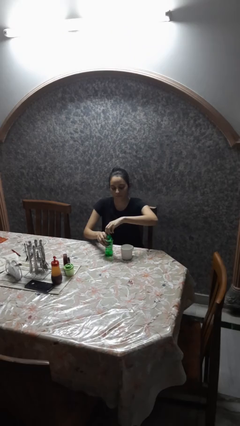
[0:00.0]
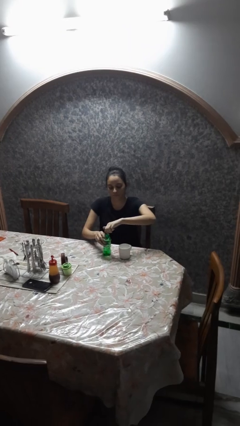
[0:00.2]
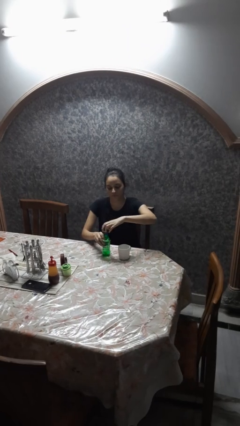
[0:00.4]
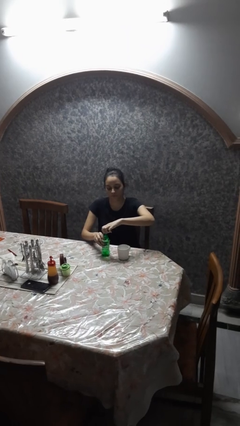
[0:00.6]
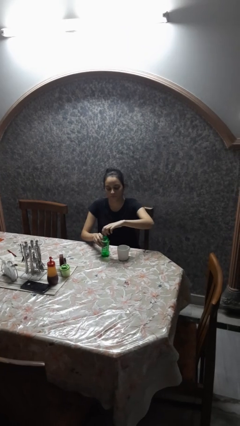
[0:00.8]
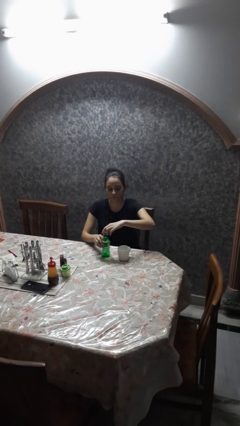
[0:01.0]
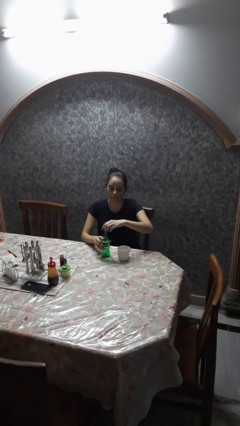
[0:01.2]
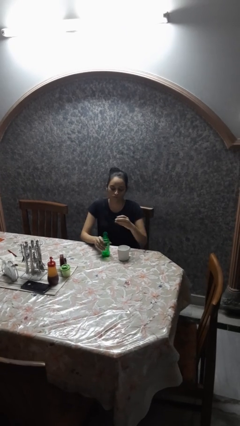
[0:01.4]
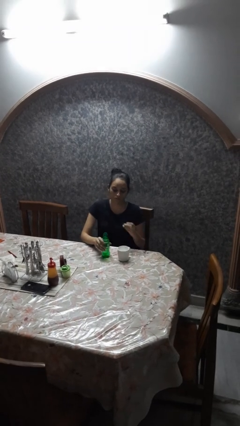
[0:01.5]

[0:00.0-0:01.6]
person unscrews lid from bottle

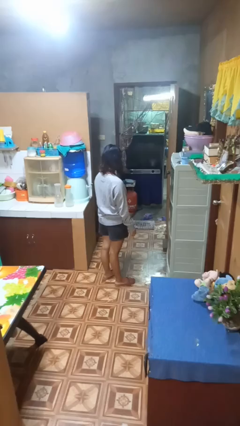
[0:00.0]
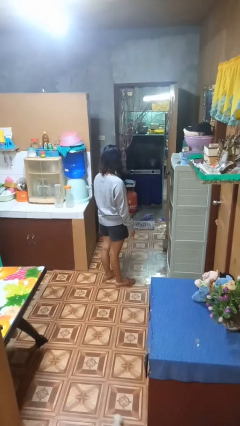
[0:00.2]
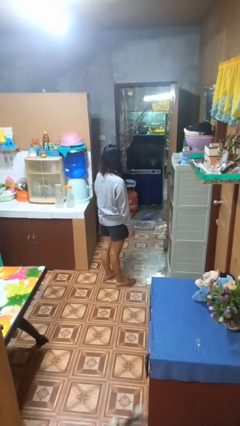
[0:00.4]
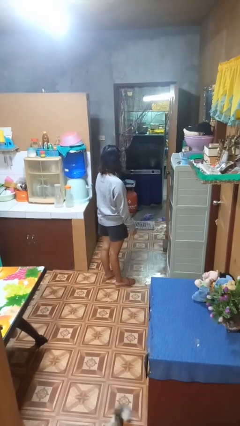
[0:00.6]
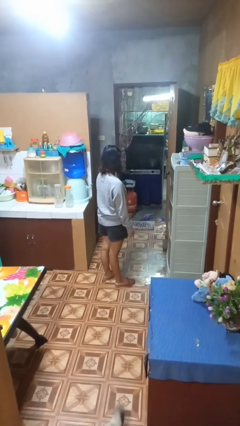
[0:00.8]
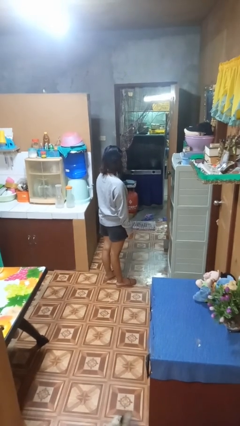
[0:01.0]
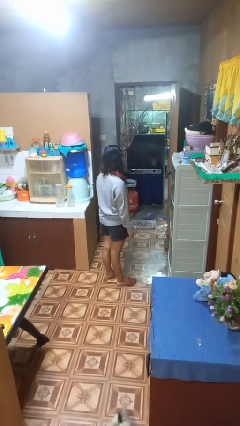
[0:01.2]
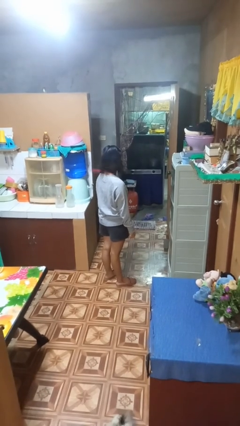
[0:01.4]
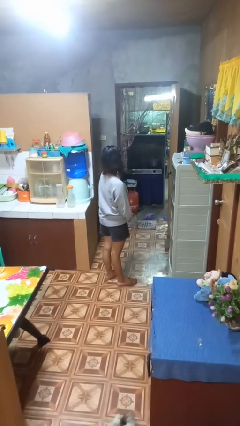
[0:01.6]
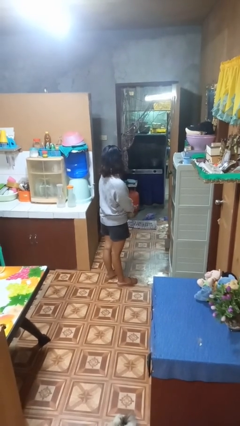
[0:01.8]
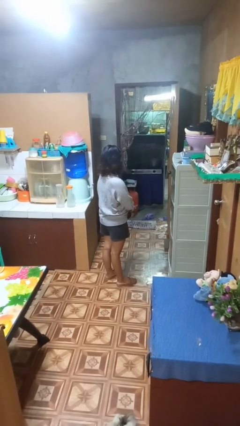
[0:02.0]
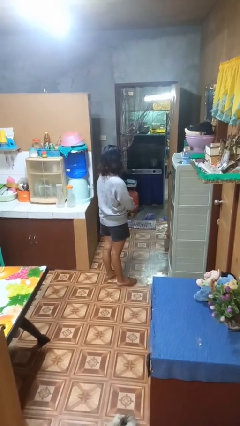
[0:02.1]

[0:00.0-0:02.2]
person takes off necktie

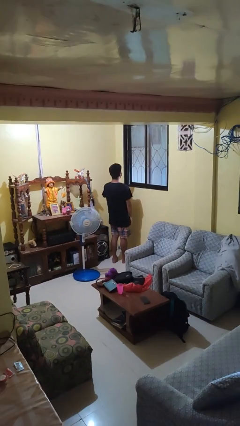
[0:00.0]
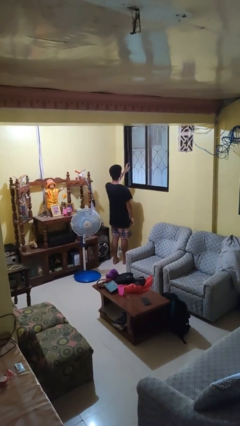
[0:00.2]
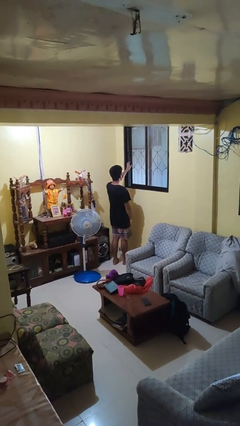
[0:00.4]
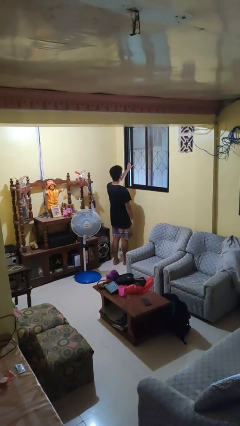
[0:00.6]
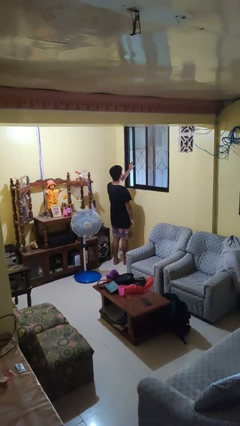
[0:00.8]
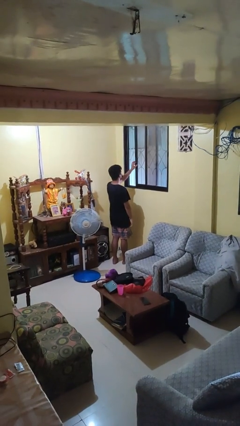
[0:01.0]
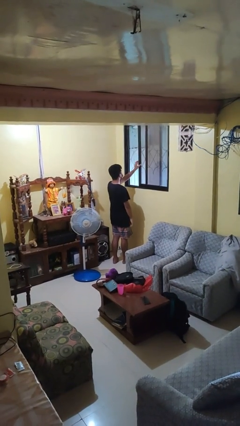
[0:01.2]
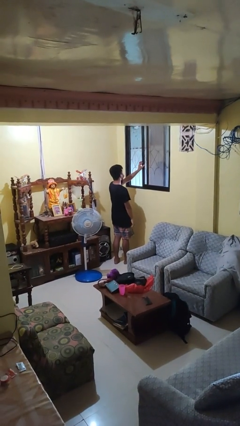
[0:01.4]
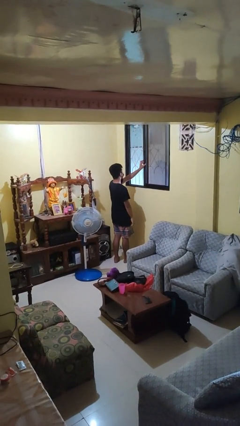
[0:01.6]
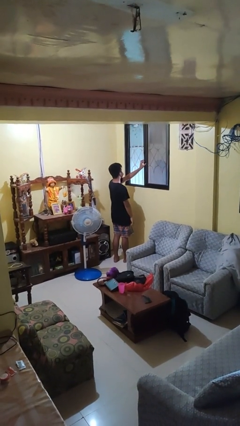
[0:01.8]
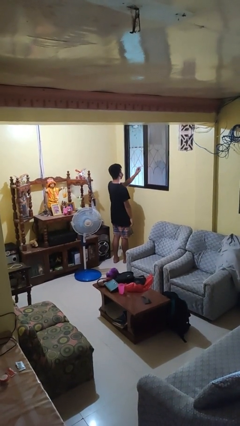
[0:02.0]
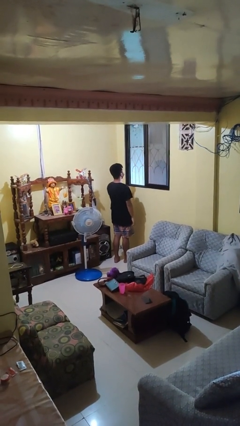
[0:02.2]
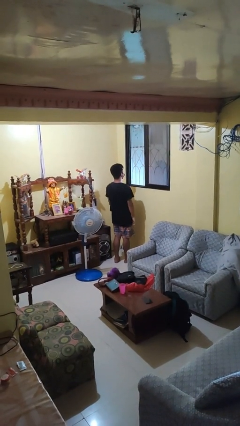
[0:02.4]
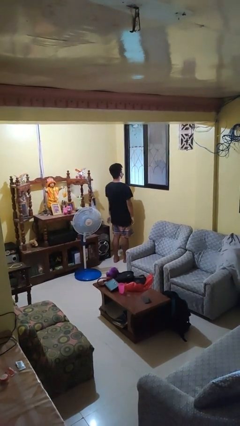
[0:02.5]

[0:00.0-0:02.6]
person opens home window

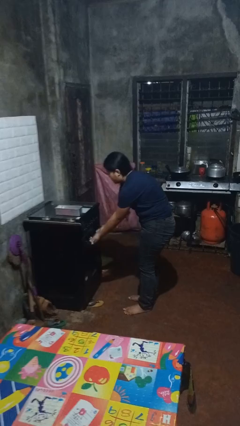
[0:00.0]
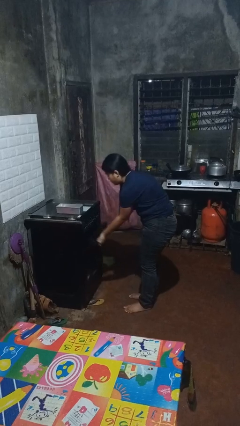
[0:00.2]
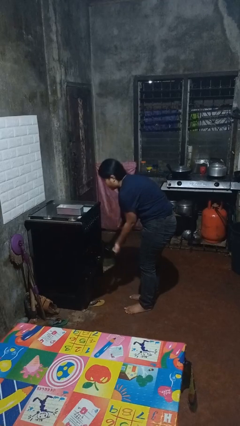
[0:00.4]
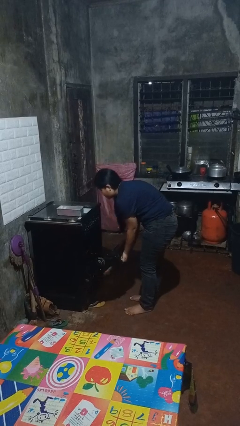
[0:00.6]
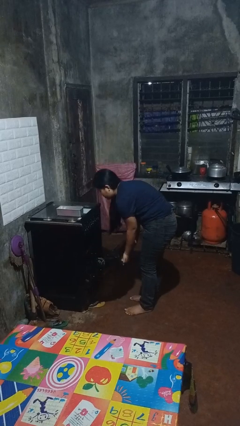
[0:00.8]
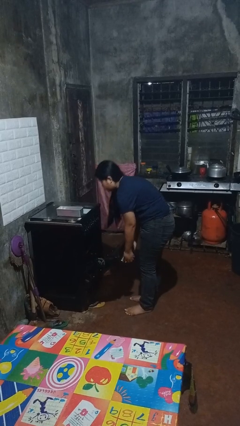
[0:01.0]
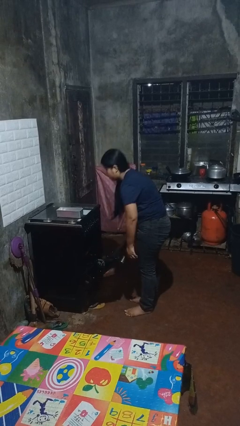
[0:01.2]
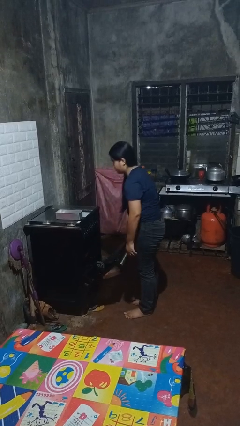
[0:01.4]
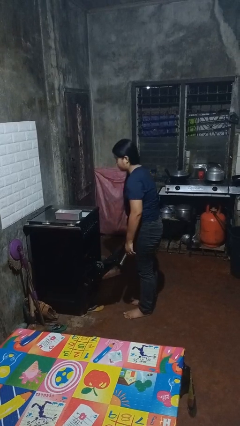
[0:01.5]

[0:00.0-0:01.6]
person opens oven door

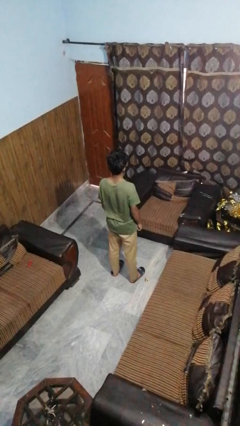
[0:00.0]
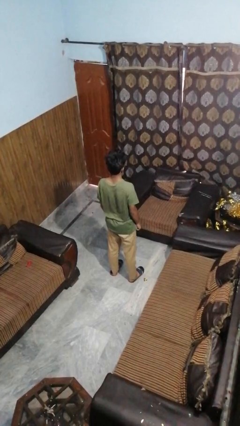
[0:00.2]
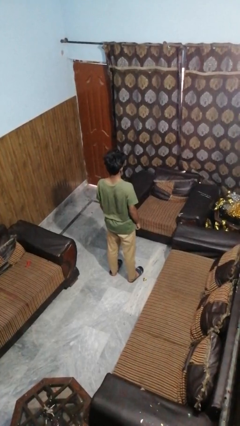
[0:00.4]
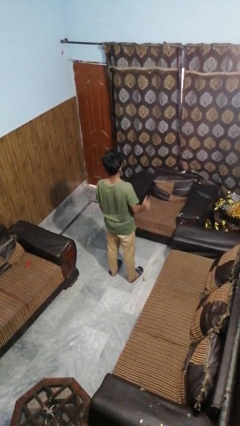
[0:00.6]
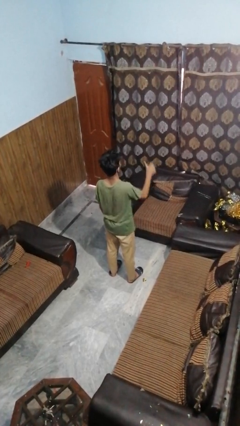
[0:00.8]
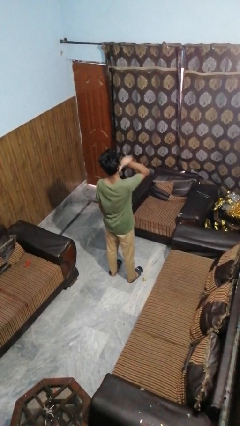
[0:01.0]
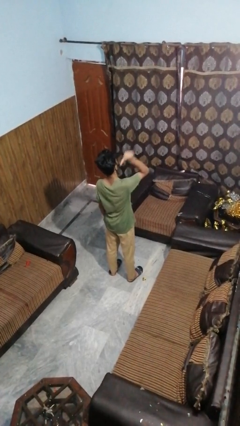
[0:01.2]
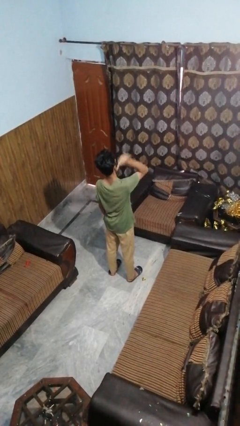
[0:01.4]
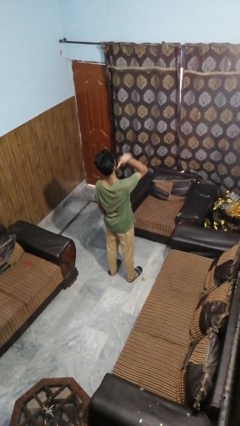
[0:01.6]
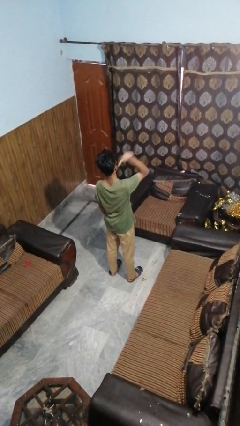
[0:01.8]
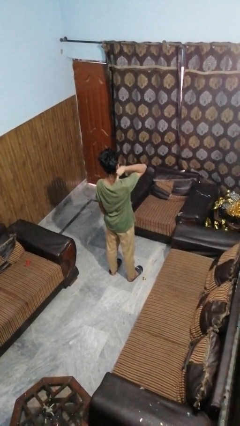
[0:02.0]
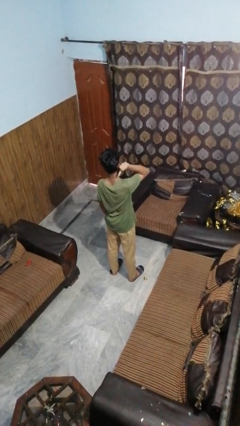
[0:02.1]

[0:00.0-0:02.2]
person gestures behind me

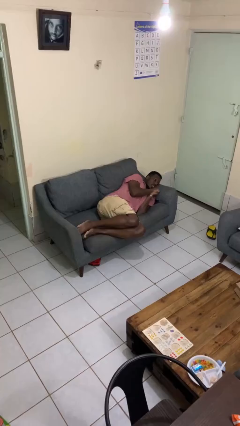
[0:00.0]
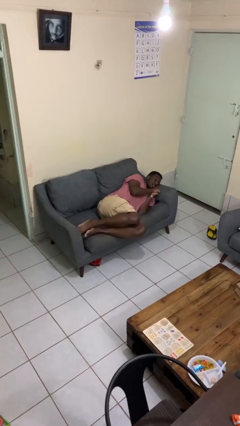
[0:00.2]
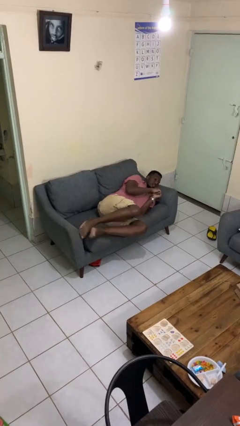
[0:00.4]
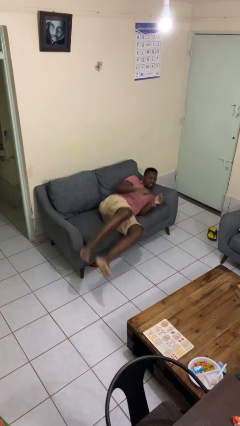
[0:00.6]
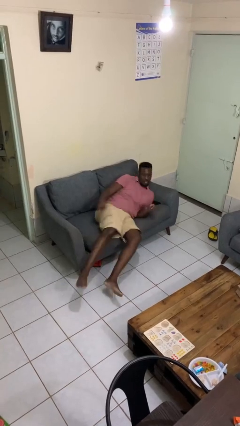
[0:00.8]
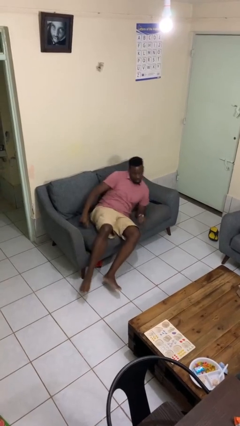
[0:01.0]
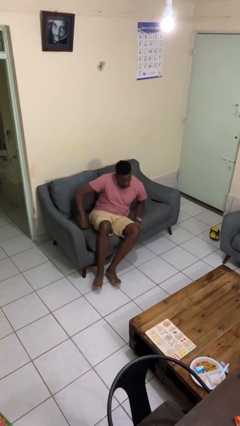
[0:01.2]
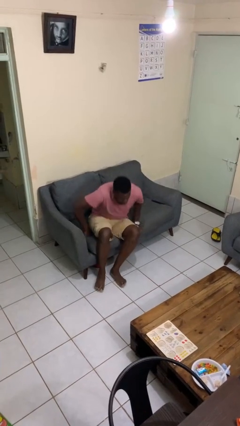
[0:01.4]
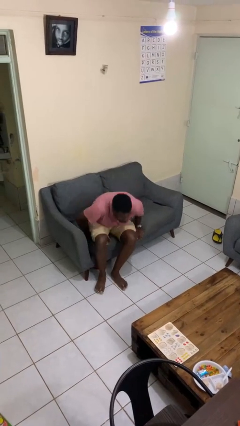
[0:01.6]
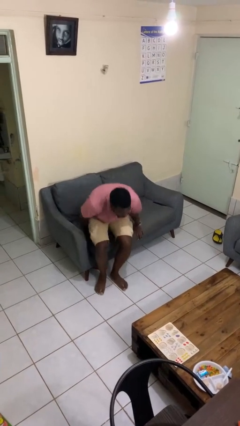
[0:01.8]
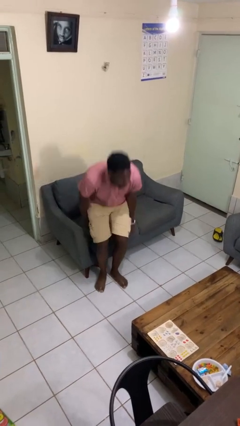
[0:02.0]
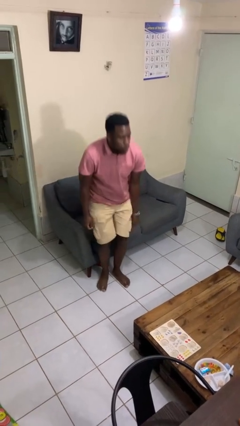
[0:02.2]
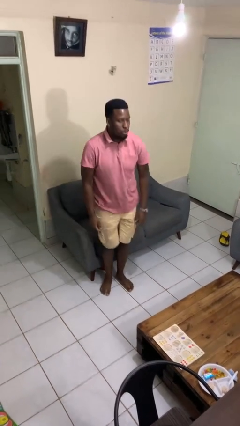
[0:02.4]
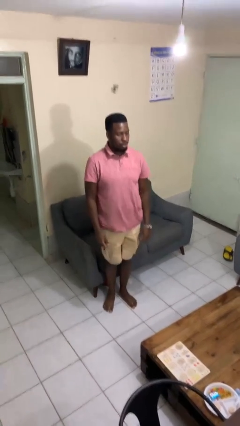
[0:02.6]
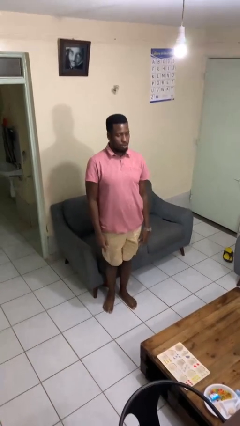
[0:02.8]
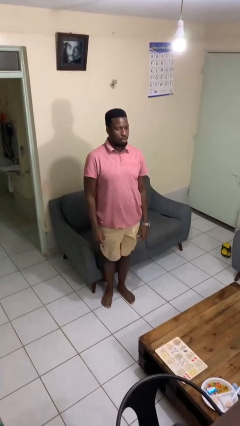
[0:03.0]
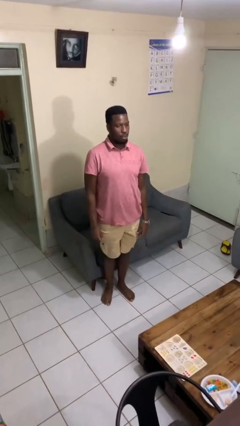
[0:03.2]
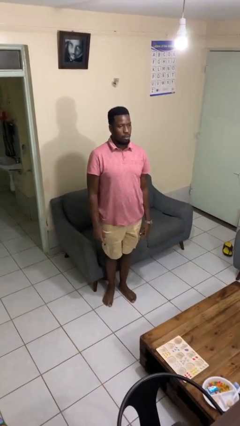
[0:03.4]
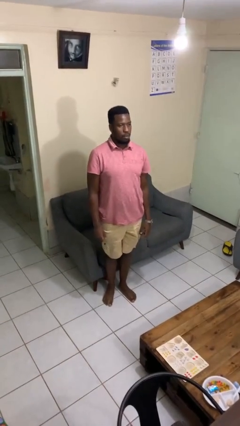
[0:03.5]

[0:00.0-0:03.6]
person stands up

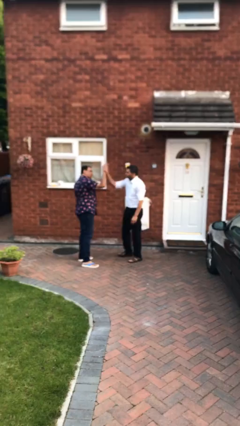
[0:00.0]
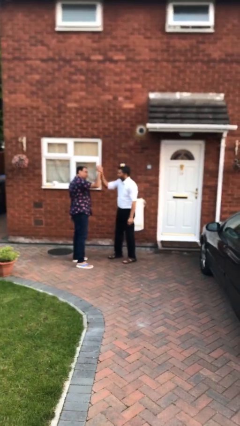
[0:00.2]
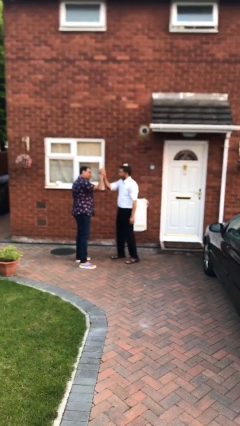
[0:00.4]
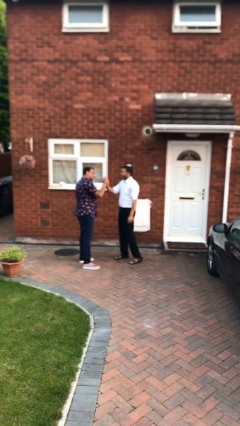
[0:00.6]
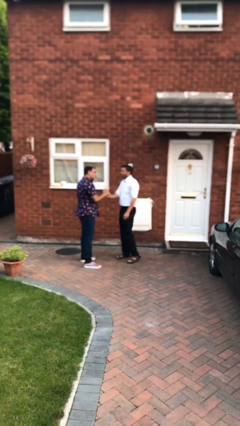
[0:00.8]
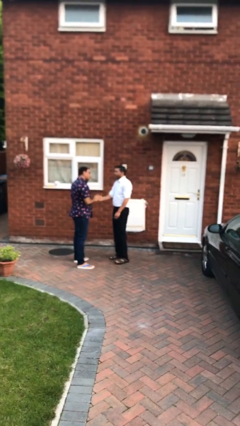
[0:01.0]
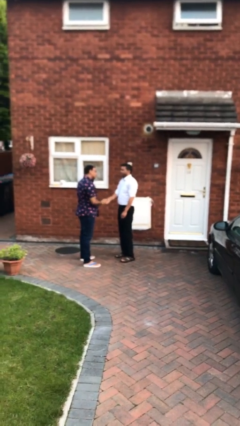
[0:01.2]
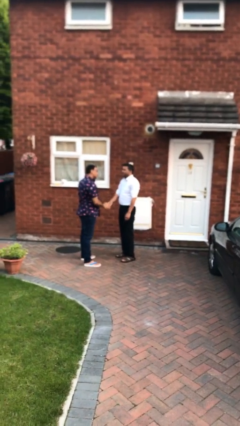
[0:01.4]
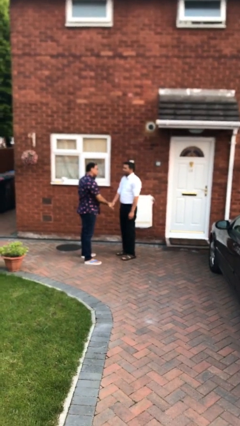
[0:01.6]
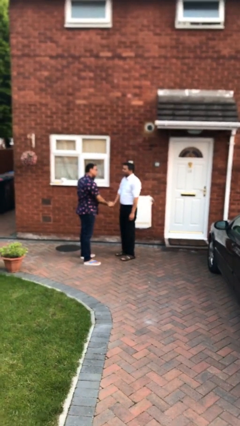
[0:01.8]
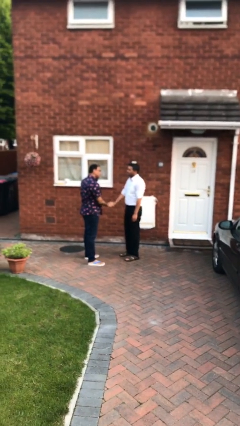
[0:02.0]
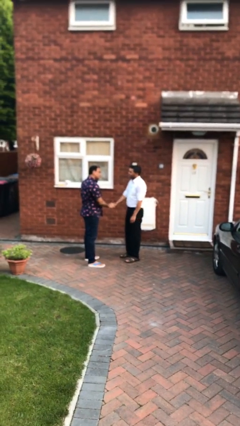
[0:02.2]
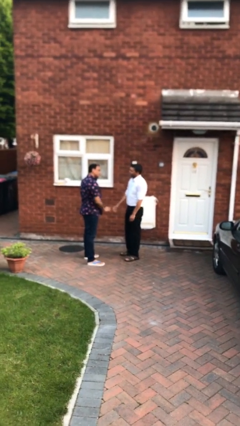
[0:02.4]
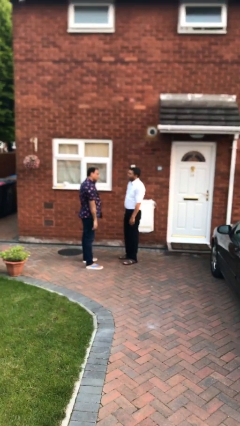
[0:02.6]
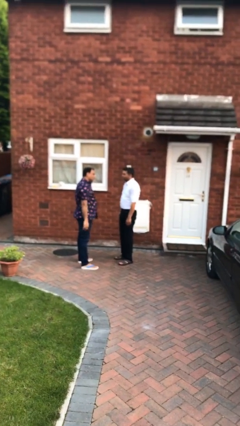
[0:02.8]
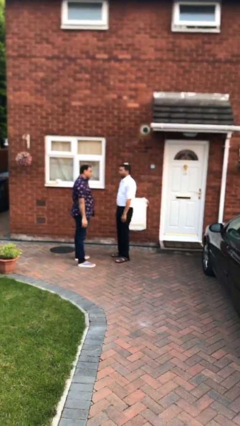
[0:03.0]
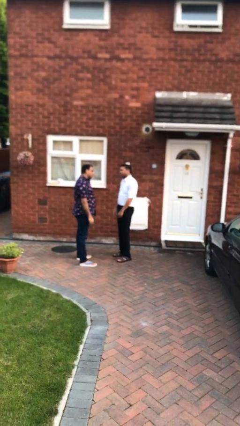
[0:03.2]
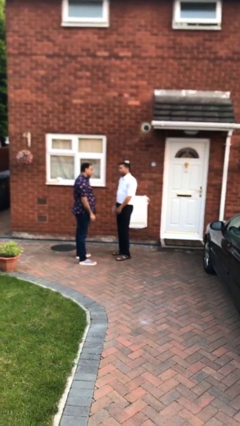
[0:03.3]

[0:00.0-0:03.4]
person highfives hand
